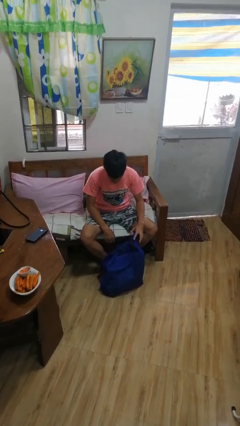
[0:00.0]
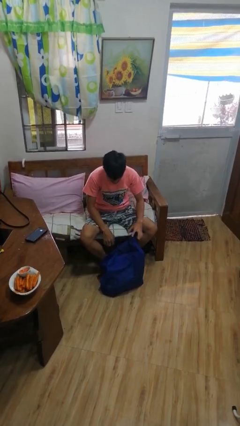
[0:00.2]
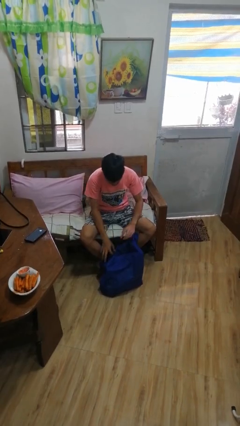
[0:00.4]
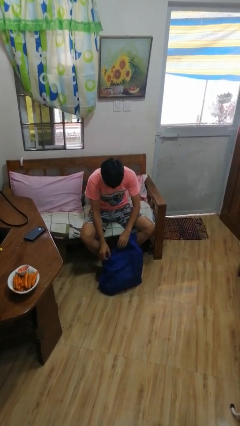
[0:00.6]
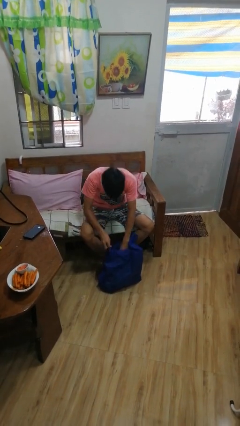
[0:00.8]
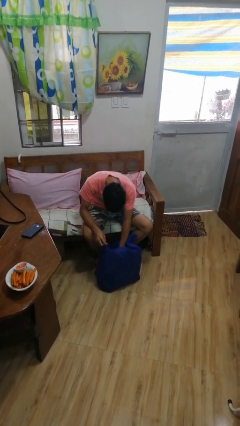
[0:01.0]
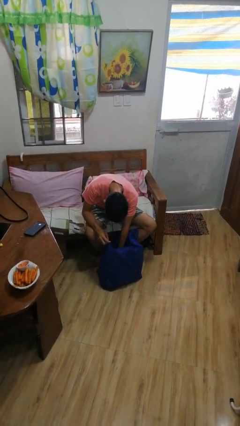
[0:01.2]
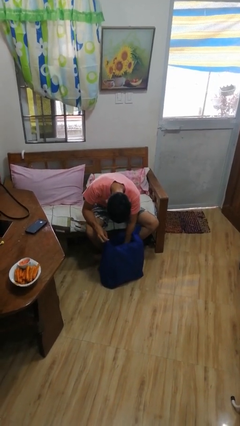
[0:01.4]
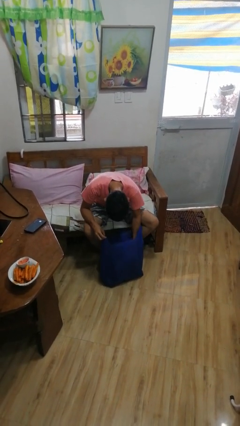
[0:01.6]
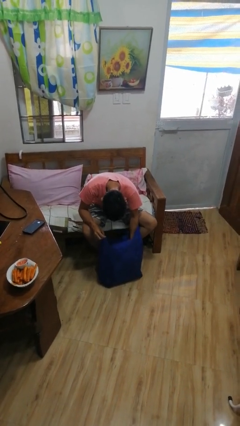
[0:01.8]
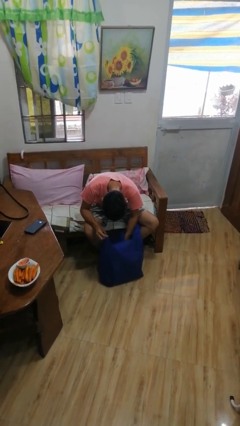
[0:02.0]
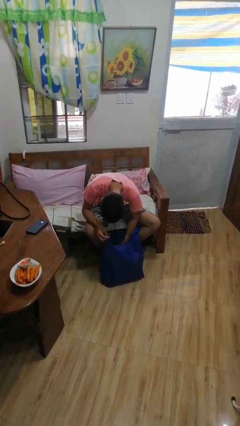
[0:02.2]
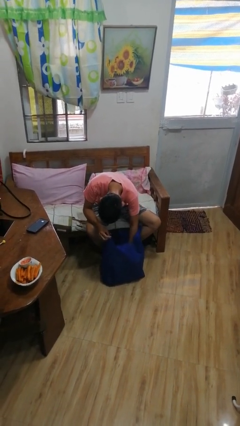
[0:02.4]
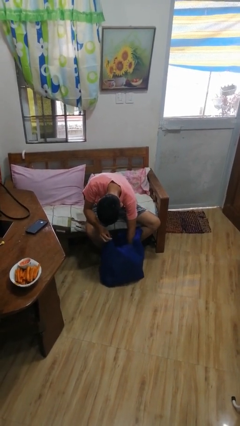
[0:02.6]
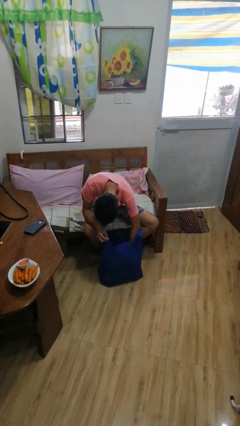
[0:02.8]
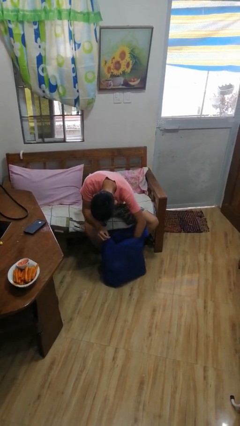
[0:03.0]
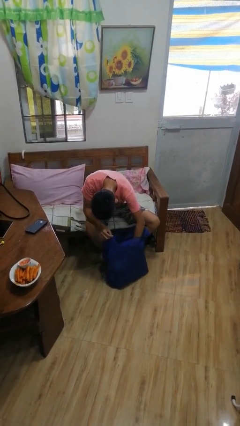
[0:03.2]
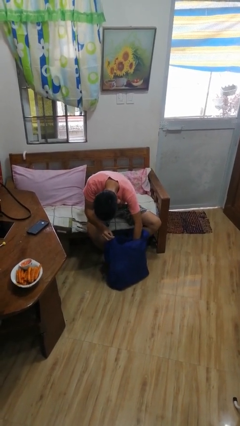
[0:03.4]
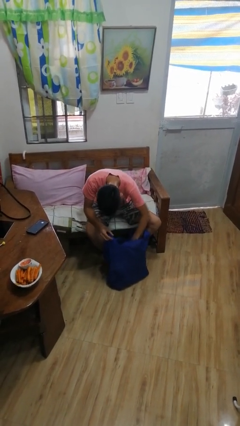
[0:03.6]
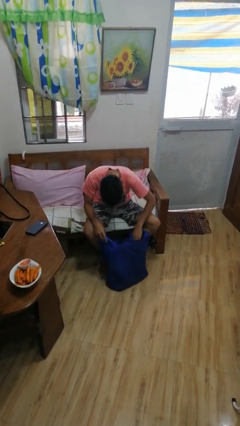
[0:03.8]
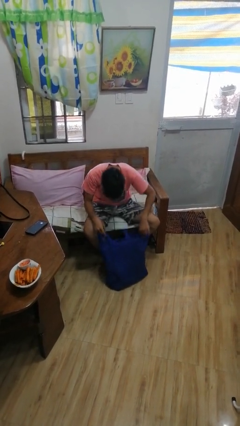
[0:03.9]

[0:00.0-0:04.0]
person searches in bag

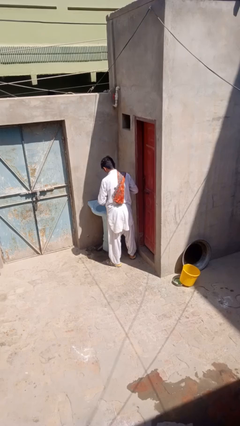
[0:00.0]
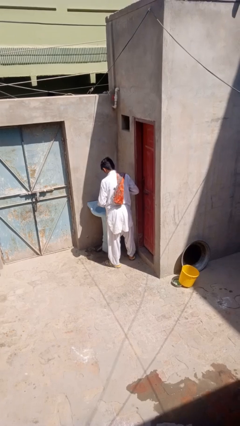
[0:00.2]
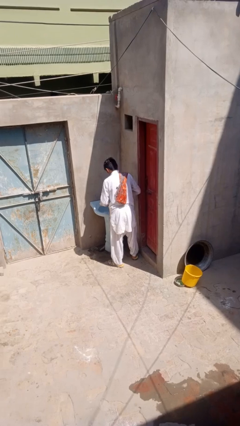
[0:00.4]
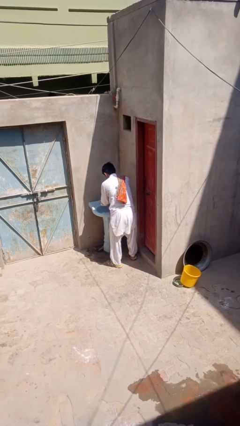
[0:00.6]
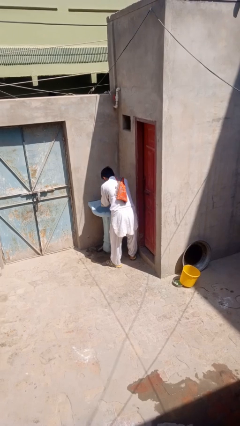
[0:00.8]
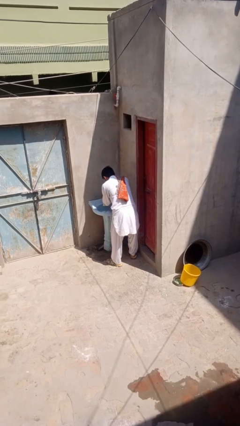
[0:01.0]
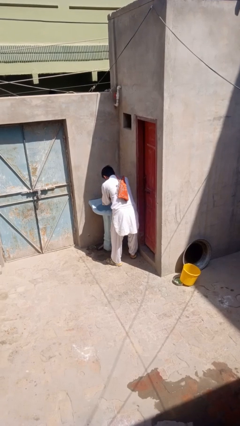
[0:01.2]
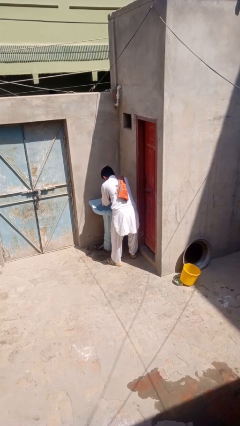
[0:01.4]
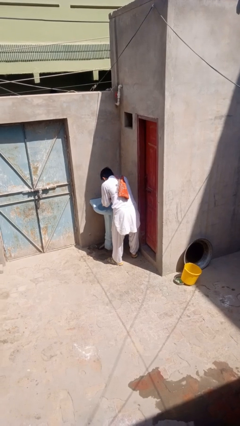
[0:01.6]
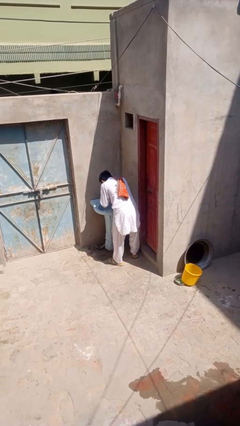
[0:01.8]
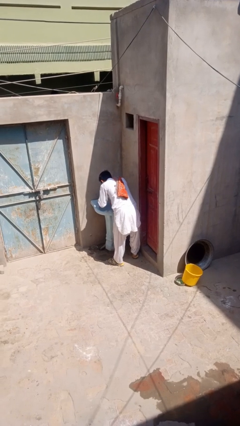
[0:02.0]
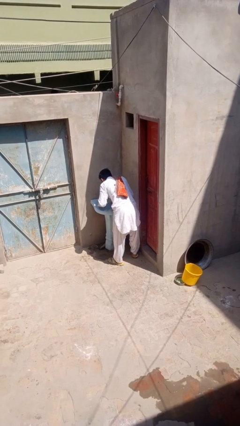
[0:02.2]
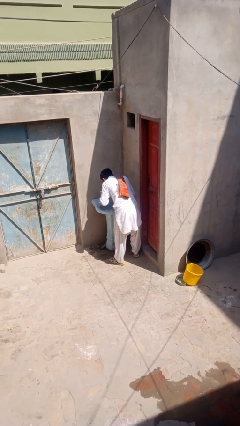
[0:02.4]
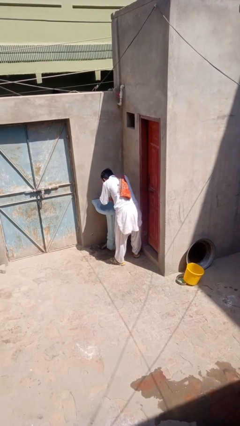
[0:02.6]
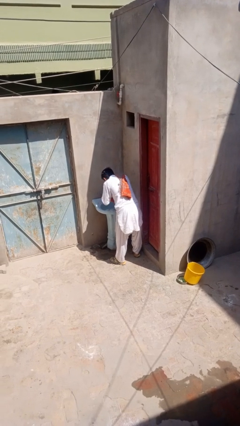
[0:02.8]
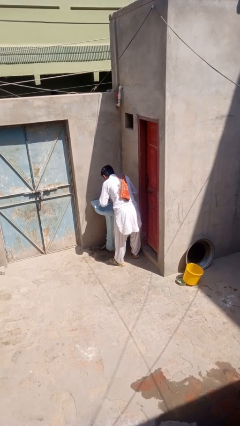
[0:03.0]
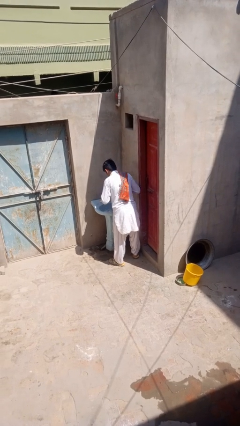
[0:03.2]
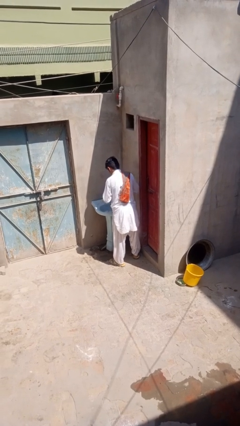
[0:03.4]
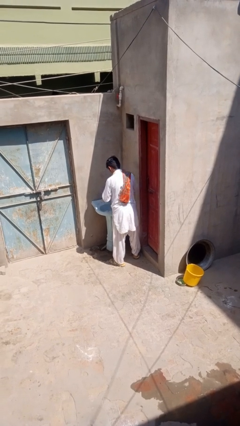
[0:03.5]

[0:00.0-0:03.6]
person washes face

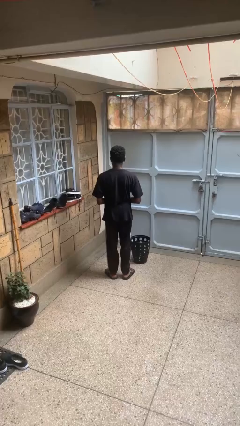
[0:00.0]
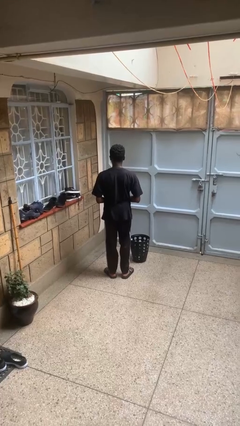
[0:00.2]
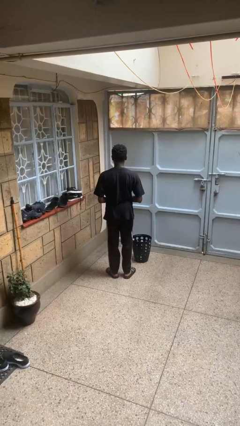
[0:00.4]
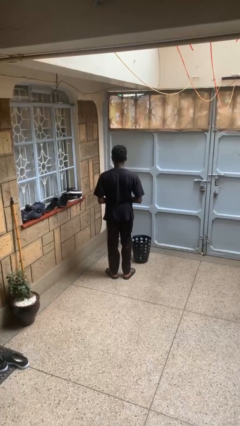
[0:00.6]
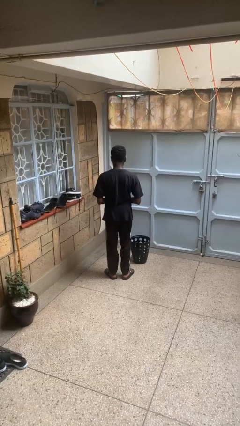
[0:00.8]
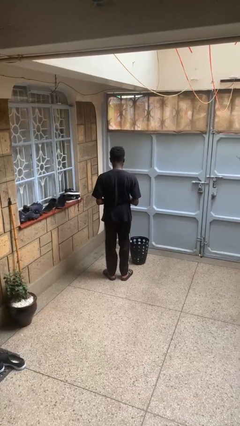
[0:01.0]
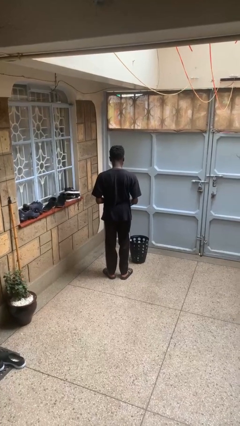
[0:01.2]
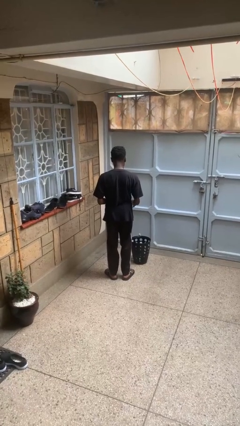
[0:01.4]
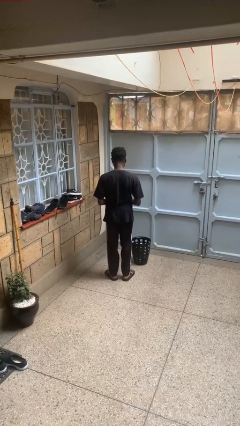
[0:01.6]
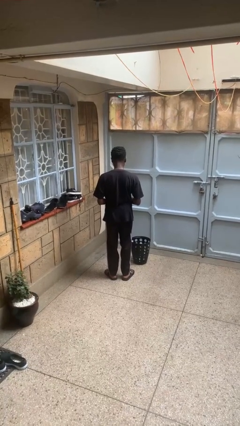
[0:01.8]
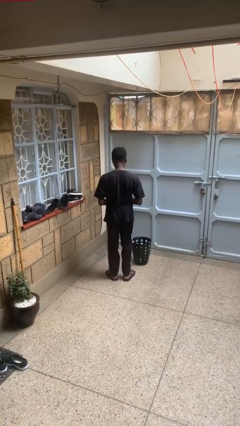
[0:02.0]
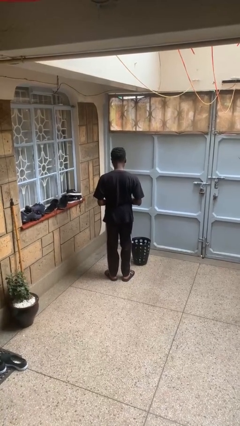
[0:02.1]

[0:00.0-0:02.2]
person discards trash

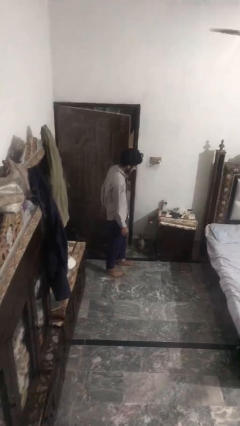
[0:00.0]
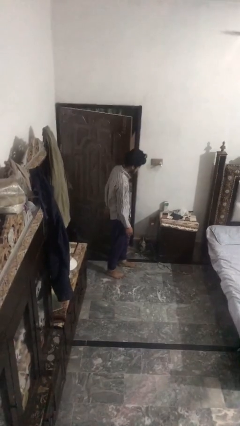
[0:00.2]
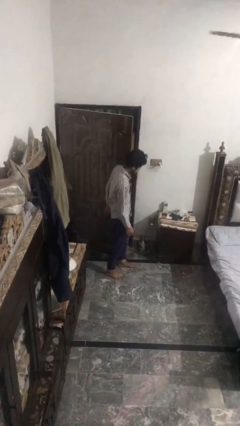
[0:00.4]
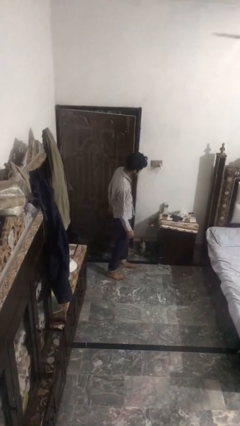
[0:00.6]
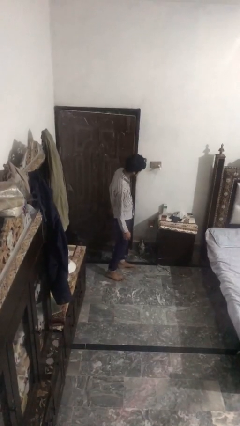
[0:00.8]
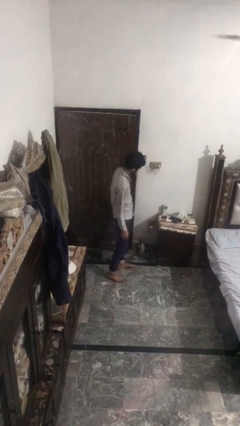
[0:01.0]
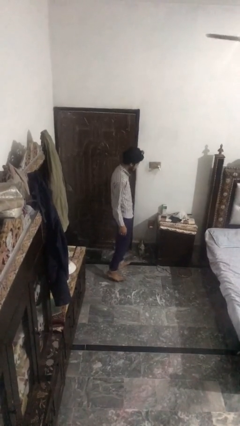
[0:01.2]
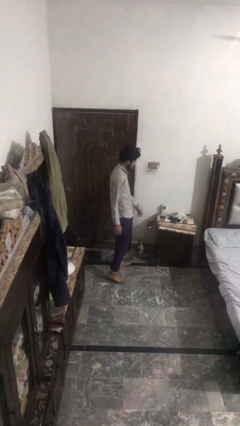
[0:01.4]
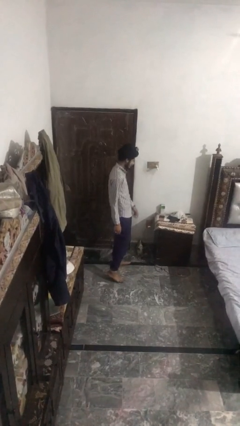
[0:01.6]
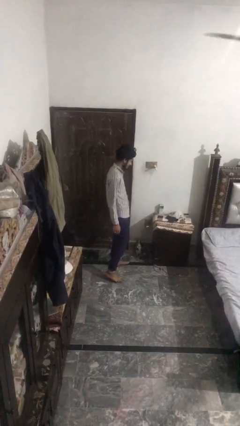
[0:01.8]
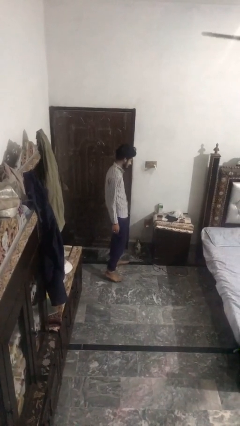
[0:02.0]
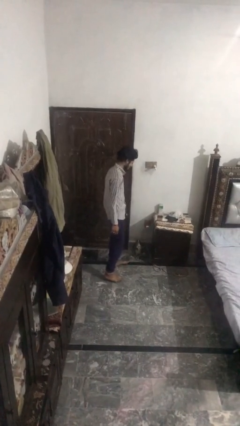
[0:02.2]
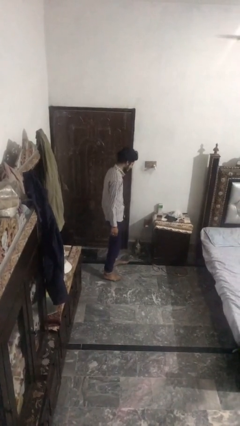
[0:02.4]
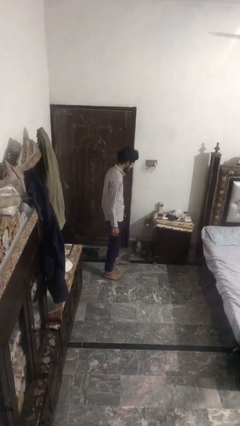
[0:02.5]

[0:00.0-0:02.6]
person closes door with hip

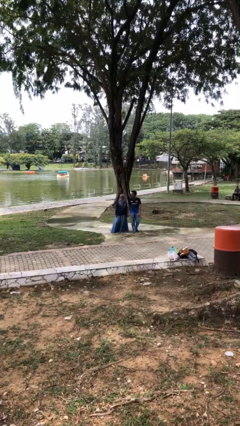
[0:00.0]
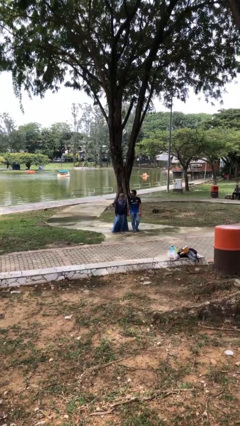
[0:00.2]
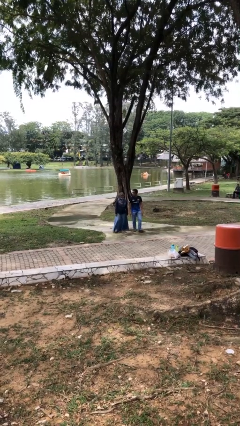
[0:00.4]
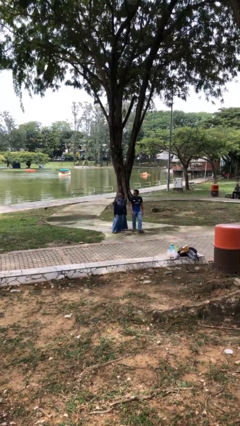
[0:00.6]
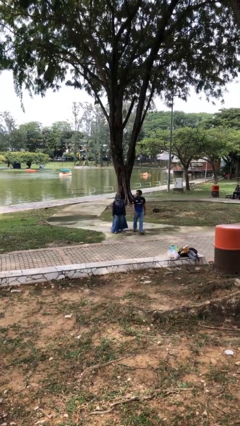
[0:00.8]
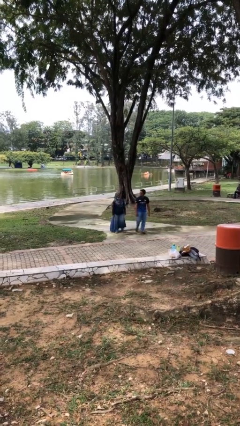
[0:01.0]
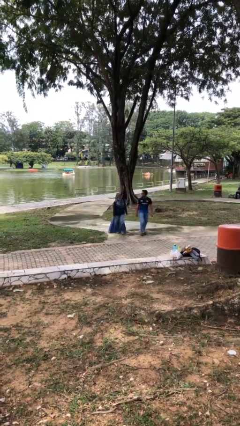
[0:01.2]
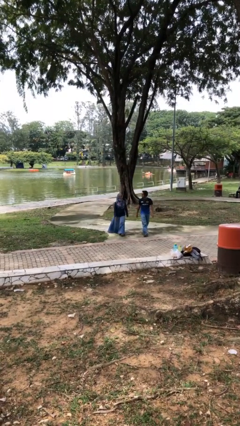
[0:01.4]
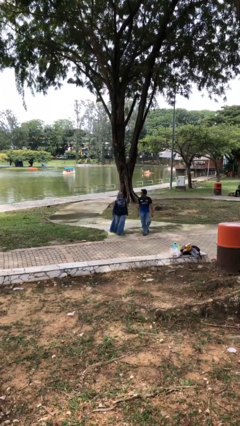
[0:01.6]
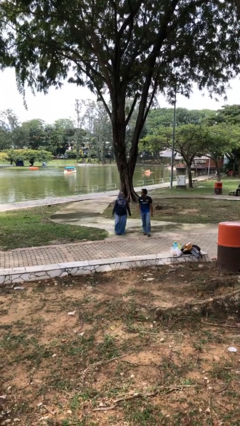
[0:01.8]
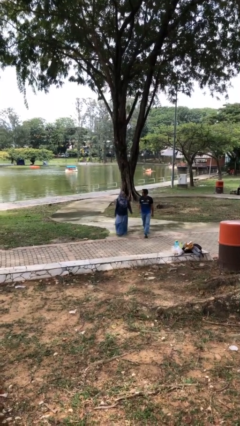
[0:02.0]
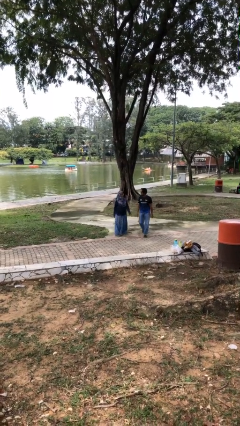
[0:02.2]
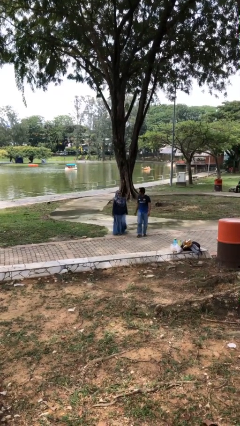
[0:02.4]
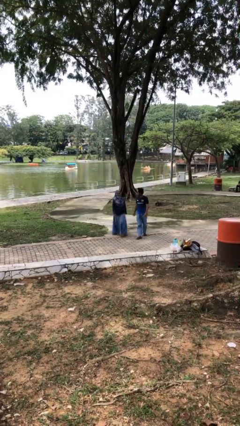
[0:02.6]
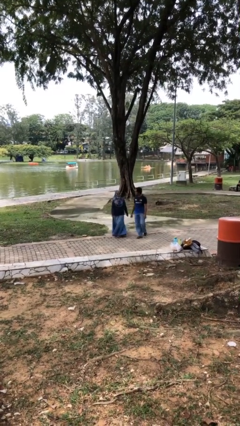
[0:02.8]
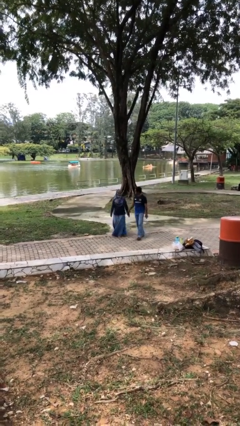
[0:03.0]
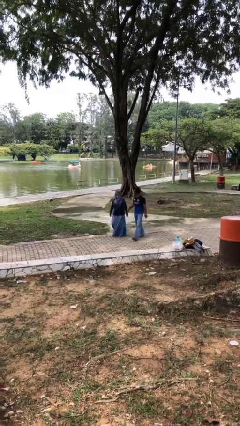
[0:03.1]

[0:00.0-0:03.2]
person talks to person

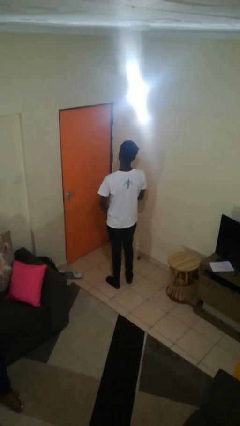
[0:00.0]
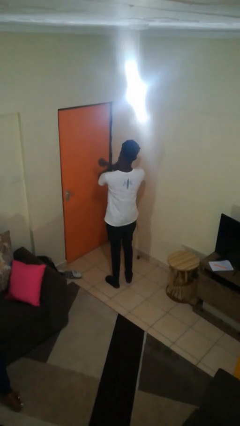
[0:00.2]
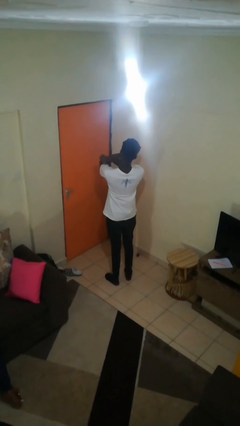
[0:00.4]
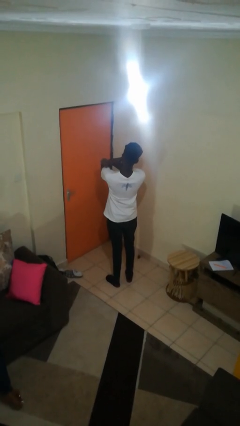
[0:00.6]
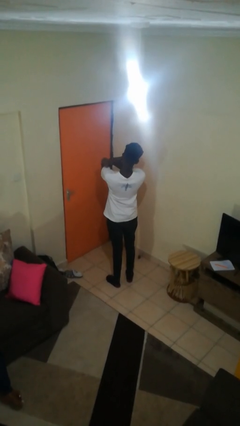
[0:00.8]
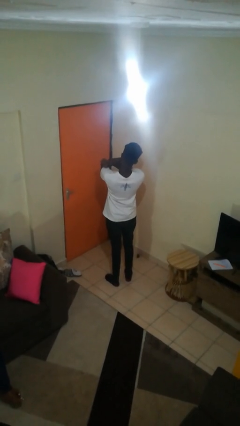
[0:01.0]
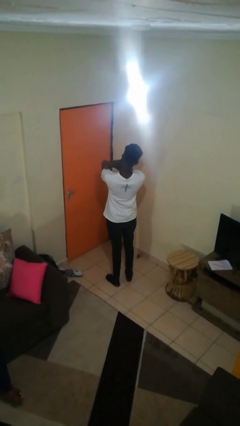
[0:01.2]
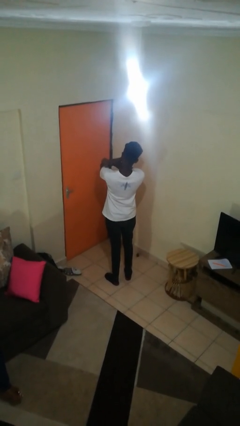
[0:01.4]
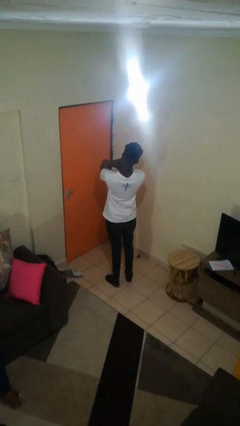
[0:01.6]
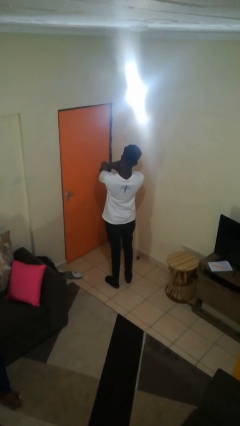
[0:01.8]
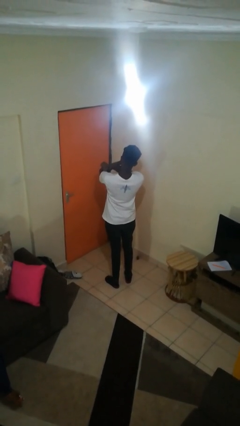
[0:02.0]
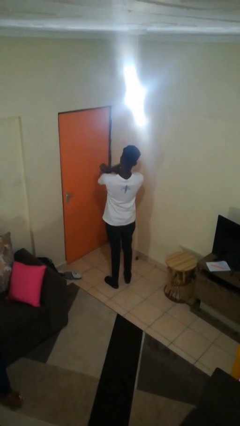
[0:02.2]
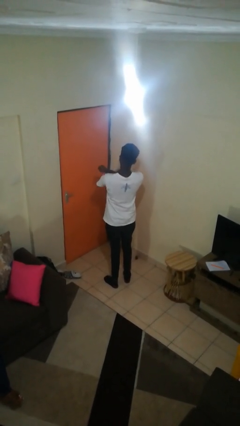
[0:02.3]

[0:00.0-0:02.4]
person gestures arms x
